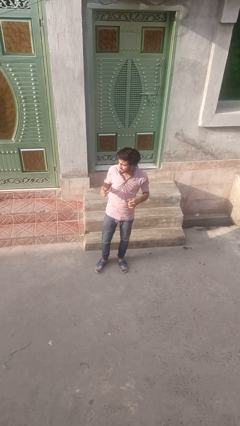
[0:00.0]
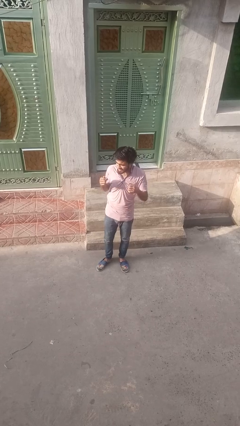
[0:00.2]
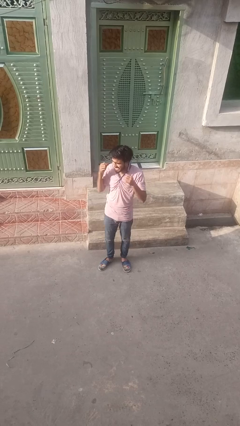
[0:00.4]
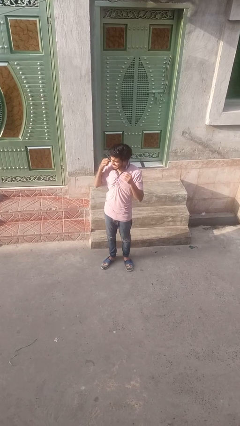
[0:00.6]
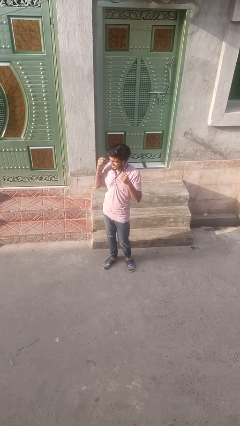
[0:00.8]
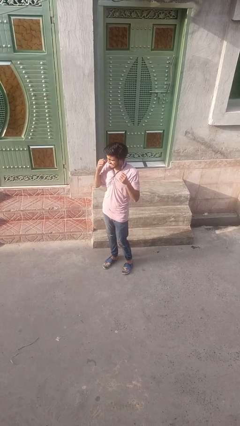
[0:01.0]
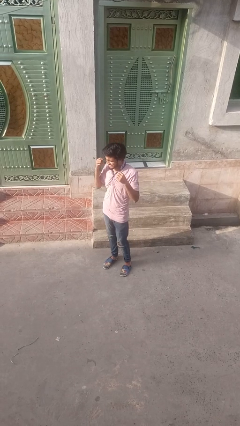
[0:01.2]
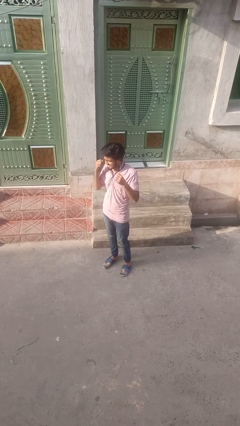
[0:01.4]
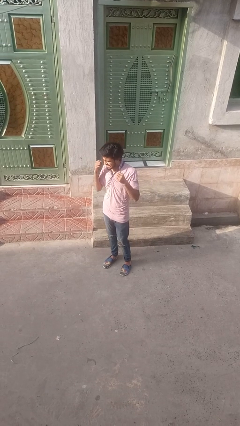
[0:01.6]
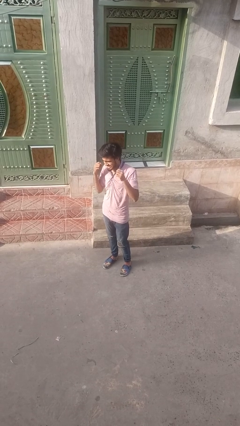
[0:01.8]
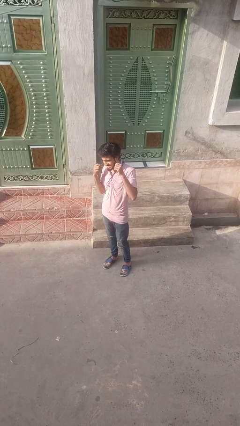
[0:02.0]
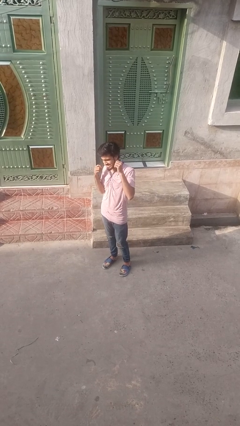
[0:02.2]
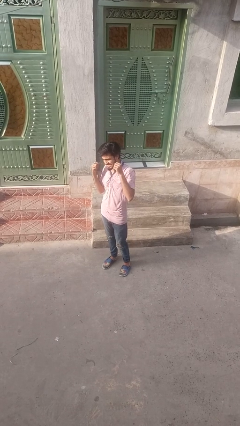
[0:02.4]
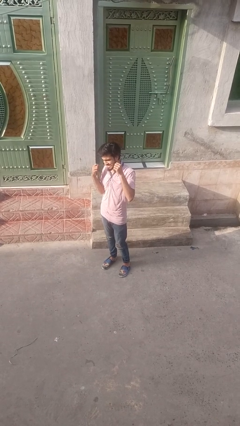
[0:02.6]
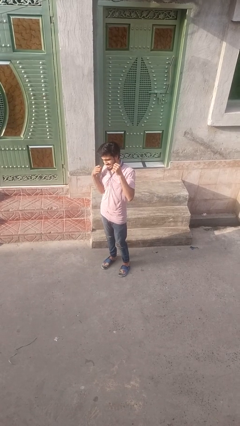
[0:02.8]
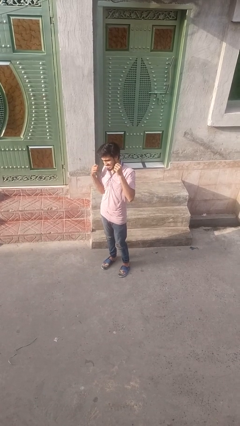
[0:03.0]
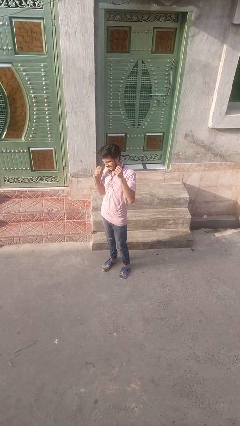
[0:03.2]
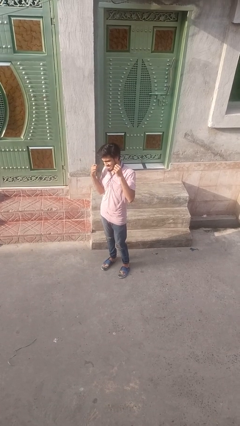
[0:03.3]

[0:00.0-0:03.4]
person flosses

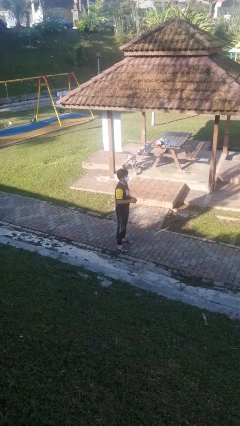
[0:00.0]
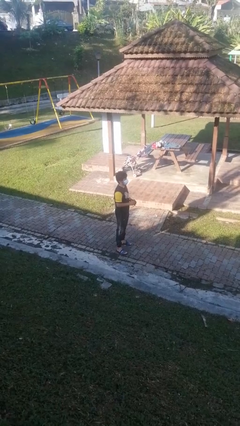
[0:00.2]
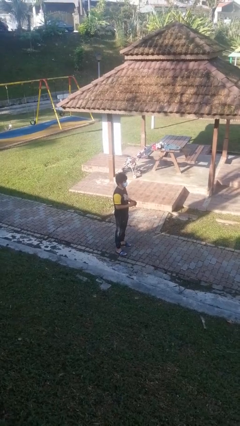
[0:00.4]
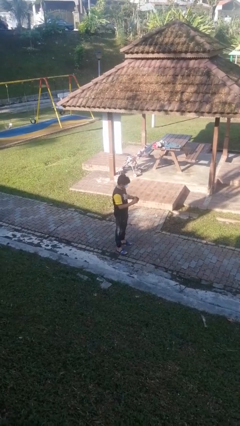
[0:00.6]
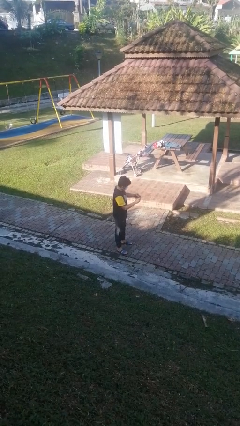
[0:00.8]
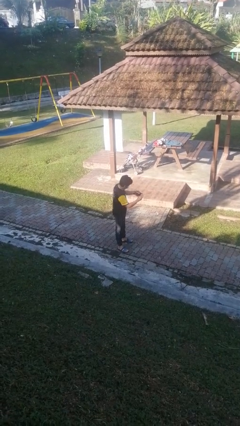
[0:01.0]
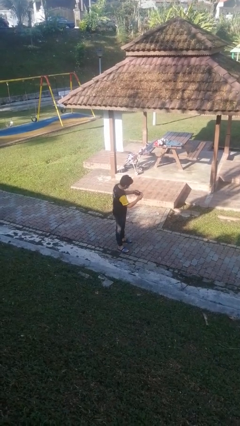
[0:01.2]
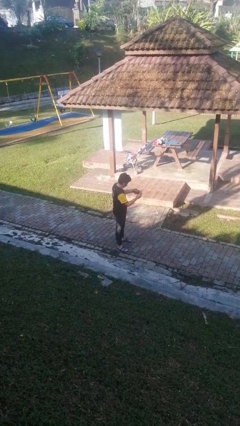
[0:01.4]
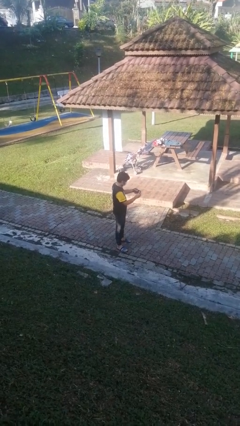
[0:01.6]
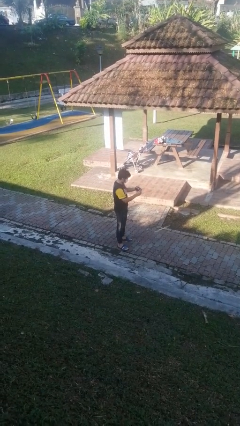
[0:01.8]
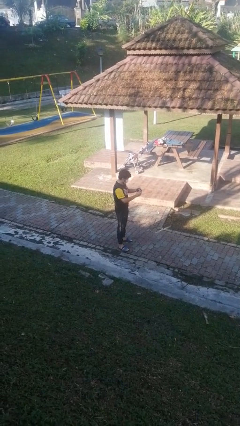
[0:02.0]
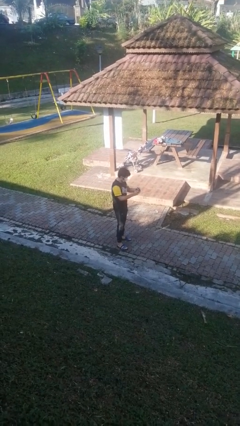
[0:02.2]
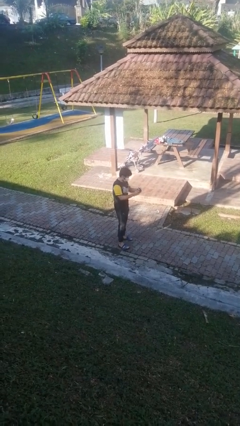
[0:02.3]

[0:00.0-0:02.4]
person searches in purse

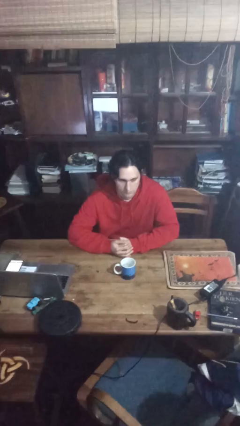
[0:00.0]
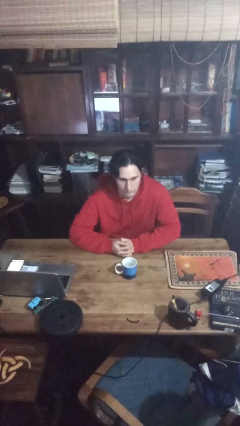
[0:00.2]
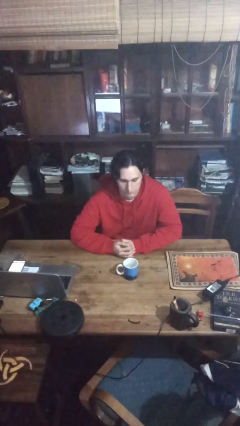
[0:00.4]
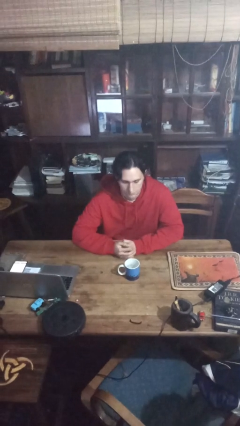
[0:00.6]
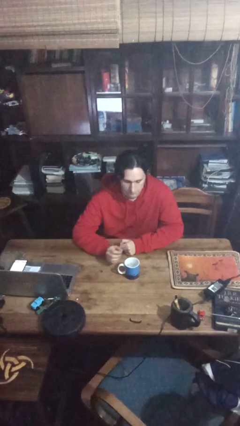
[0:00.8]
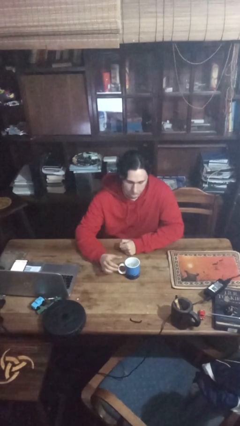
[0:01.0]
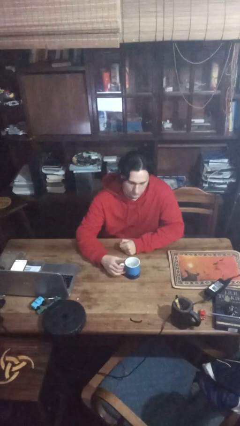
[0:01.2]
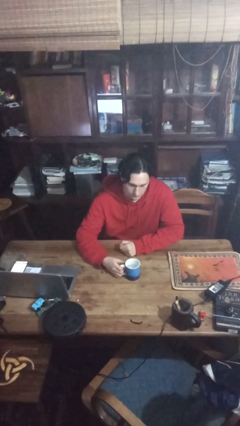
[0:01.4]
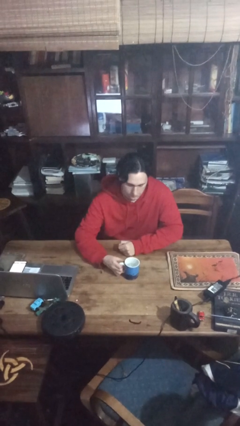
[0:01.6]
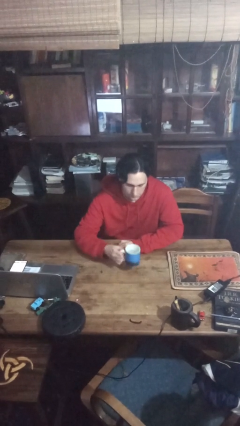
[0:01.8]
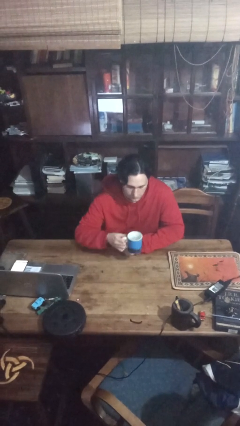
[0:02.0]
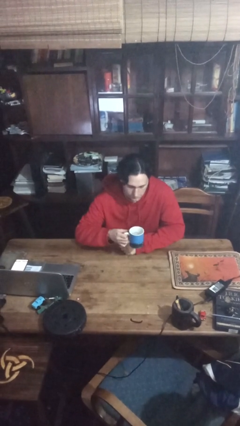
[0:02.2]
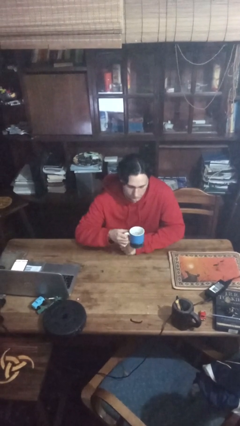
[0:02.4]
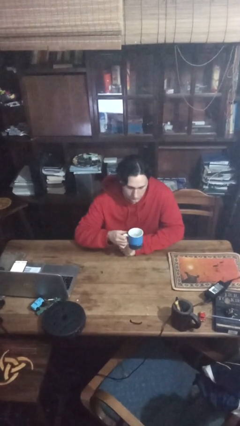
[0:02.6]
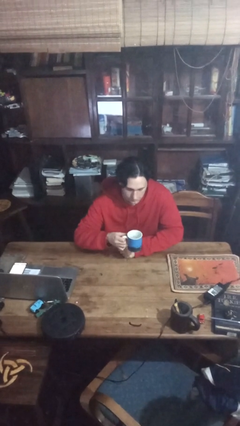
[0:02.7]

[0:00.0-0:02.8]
person picks up object from table

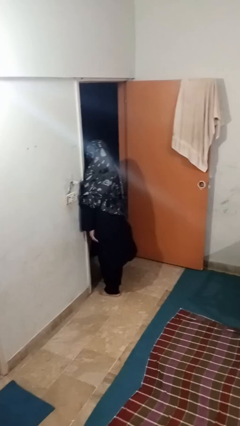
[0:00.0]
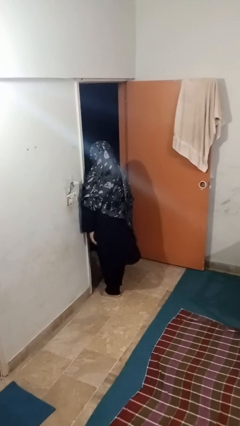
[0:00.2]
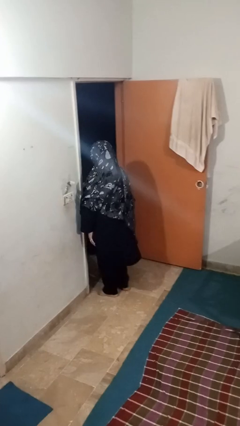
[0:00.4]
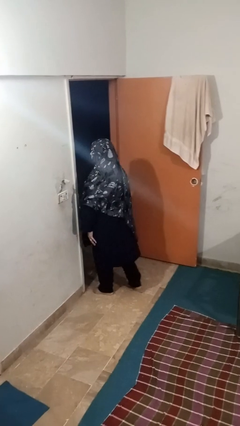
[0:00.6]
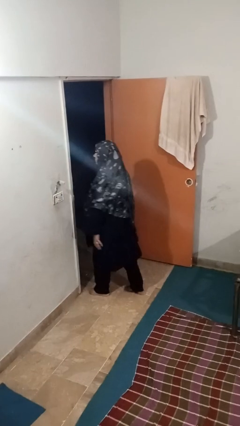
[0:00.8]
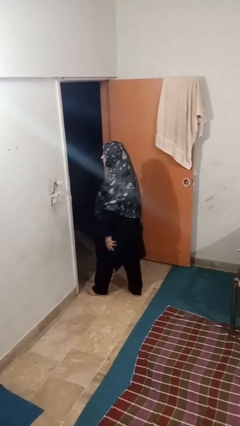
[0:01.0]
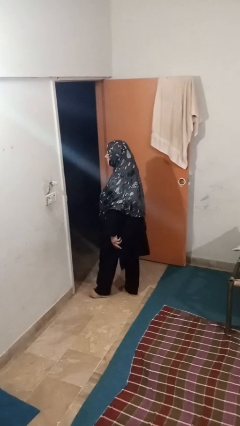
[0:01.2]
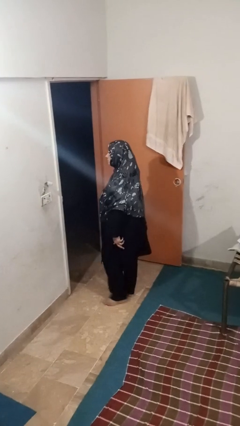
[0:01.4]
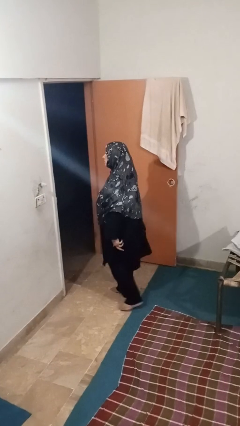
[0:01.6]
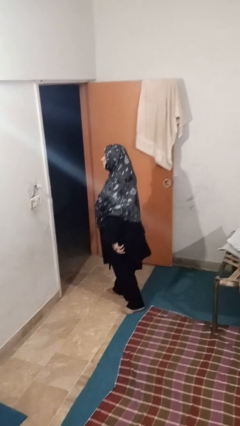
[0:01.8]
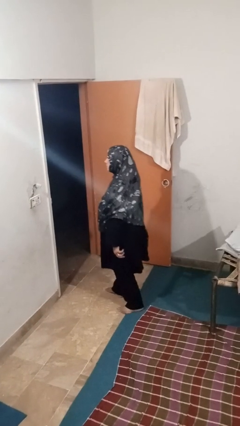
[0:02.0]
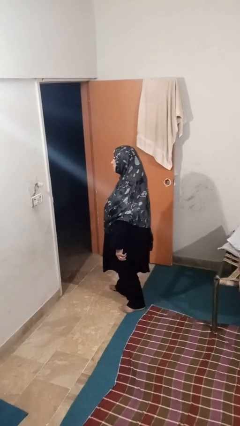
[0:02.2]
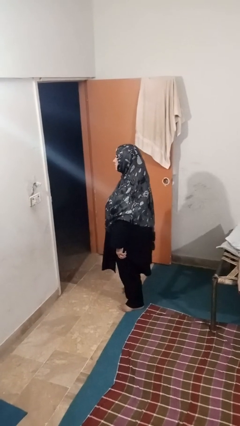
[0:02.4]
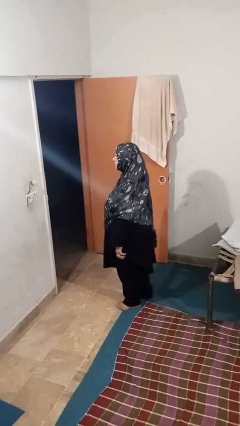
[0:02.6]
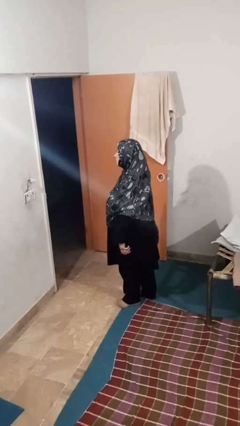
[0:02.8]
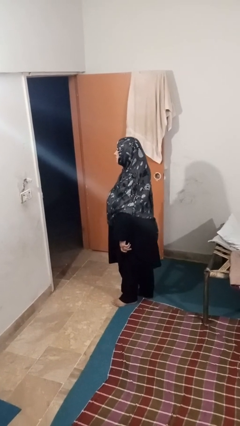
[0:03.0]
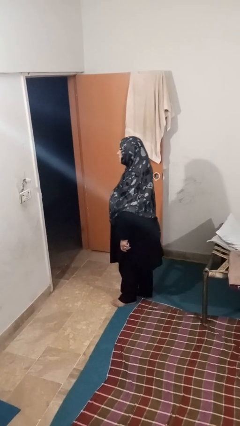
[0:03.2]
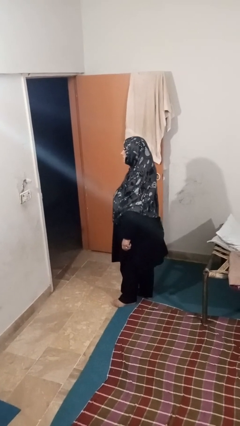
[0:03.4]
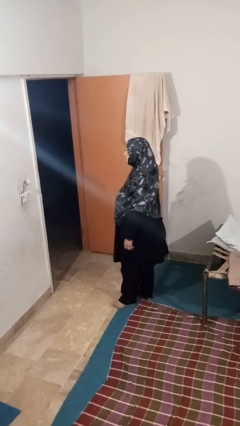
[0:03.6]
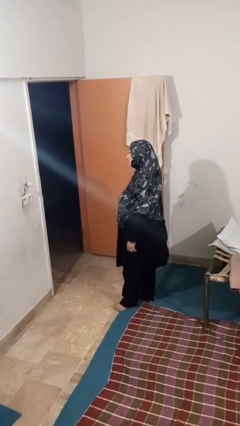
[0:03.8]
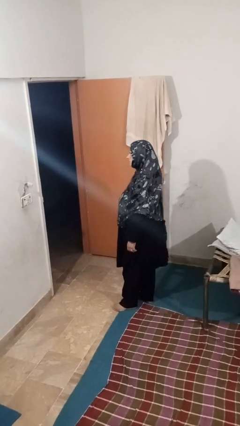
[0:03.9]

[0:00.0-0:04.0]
person bumps into wall

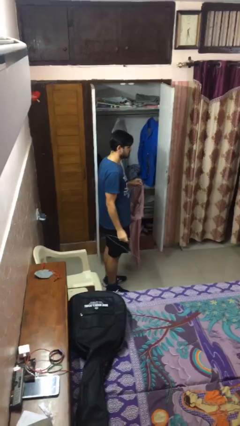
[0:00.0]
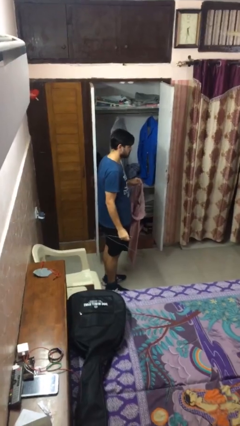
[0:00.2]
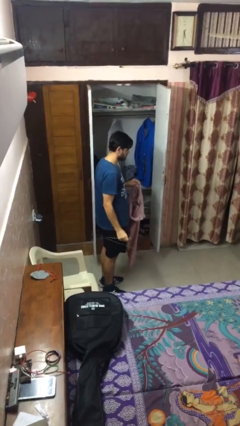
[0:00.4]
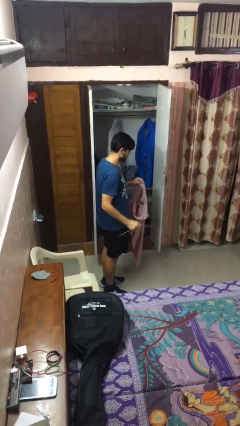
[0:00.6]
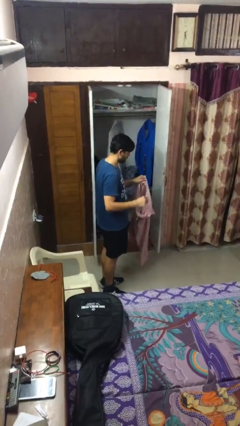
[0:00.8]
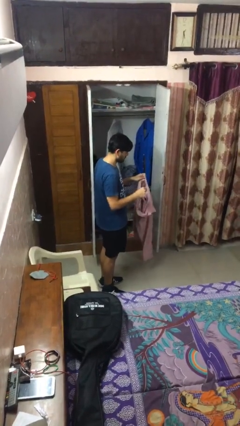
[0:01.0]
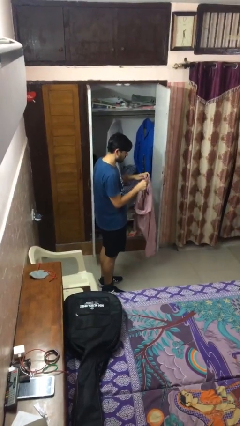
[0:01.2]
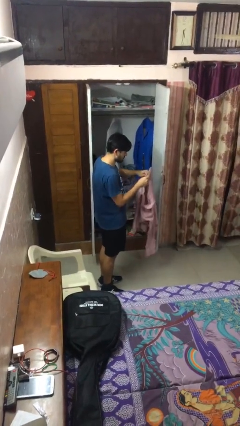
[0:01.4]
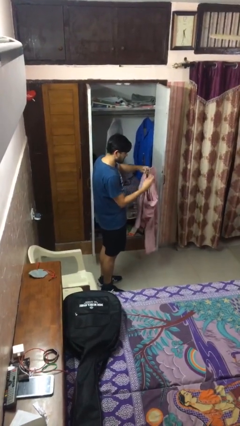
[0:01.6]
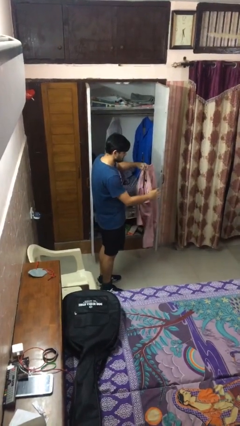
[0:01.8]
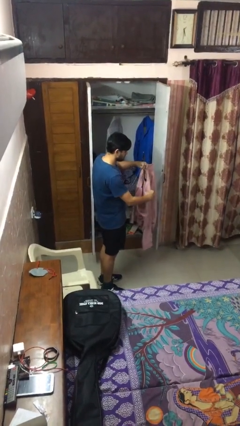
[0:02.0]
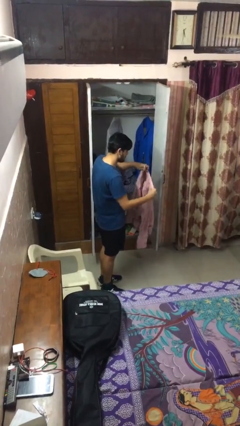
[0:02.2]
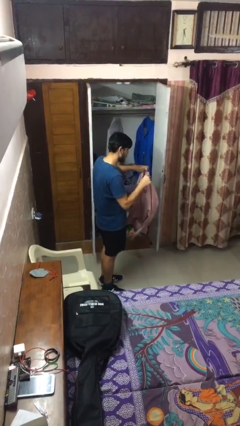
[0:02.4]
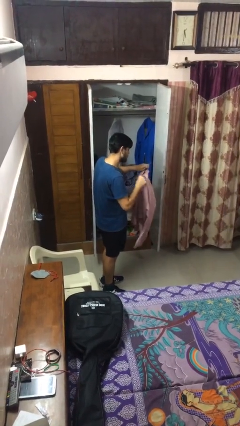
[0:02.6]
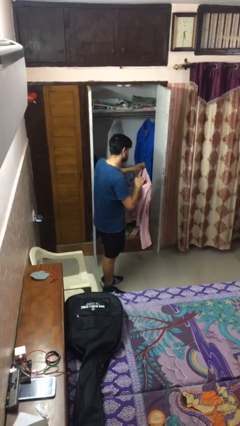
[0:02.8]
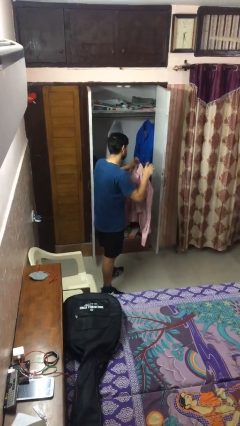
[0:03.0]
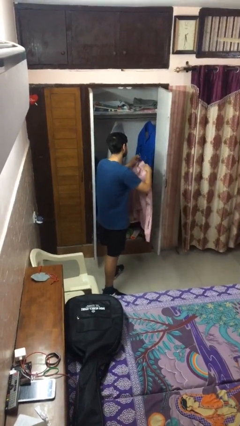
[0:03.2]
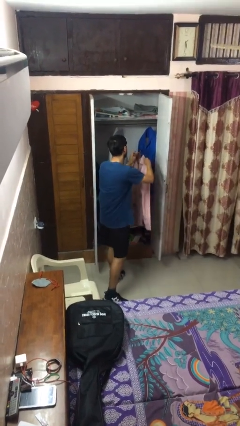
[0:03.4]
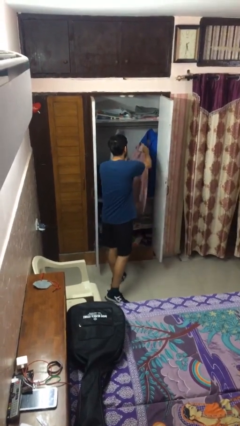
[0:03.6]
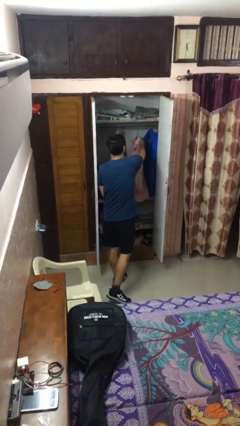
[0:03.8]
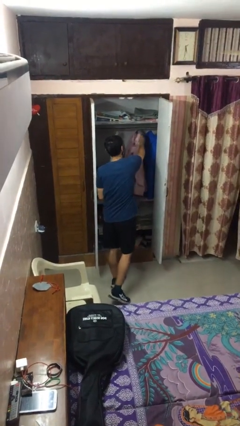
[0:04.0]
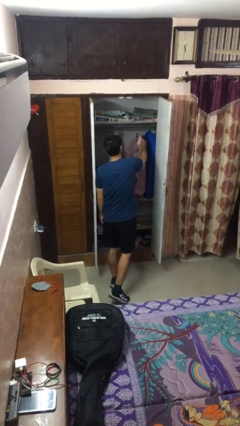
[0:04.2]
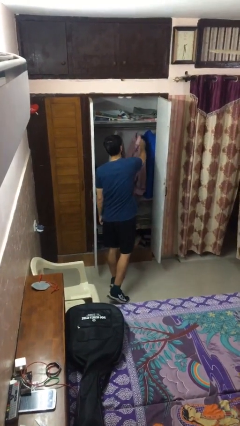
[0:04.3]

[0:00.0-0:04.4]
person puts clothes into closet

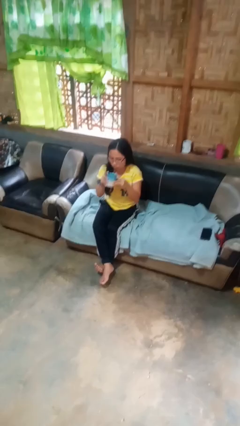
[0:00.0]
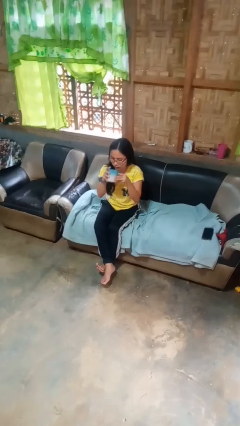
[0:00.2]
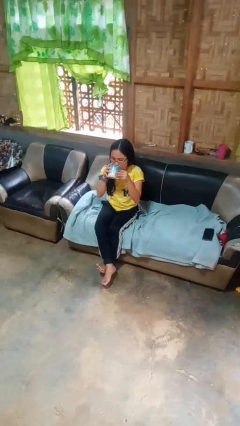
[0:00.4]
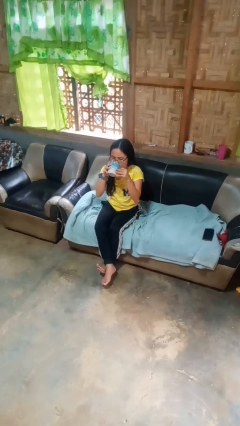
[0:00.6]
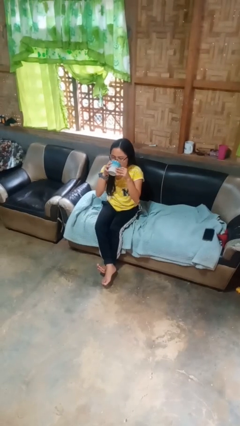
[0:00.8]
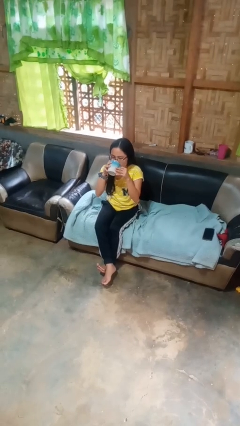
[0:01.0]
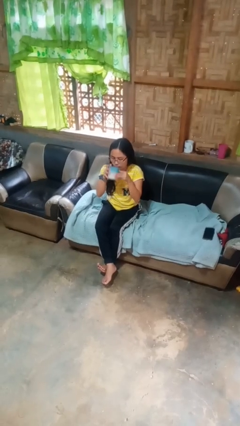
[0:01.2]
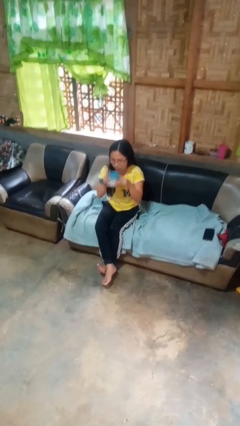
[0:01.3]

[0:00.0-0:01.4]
person drinks from mug
